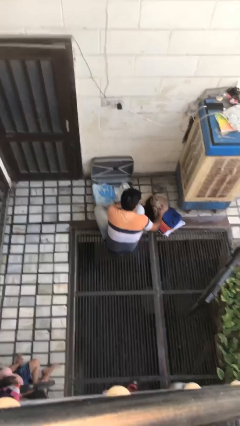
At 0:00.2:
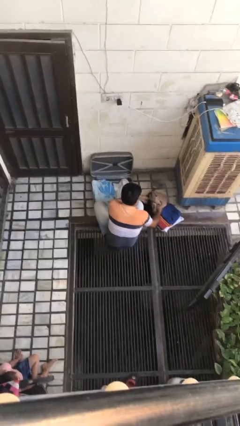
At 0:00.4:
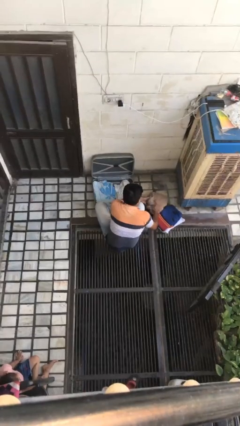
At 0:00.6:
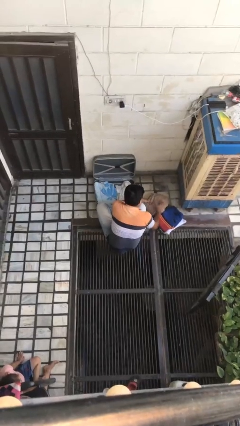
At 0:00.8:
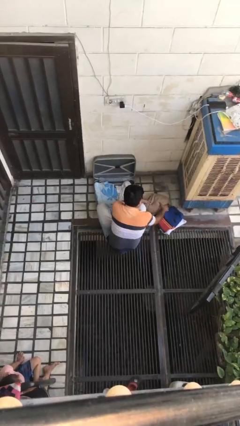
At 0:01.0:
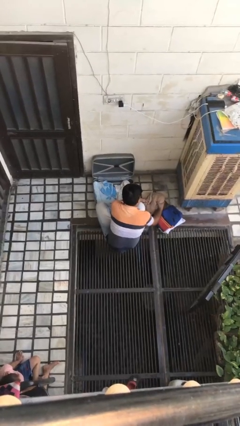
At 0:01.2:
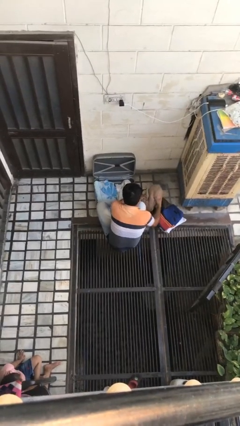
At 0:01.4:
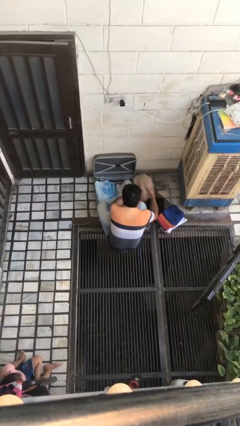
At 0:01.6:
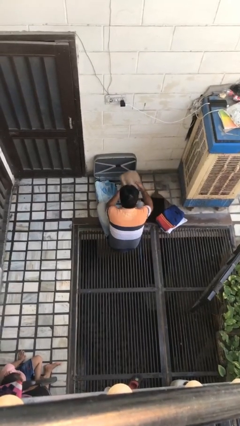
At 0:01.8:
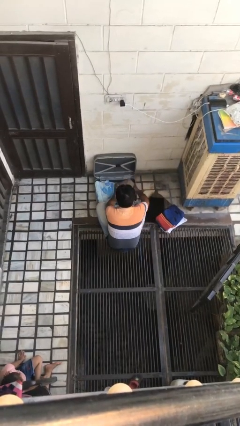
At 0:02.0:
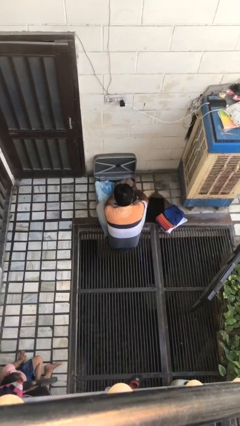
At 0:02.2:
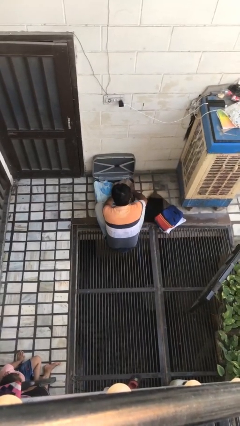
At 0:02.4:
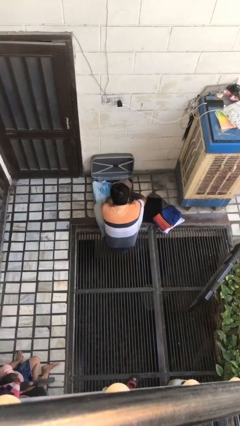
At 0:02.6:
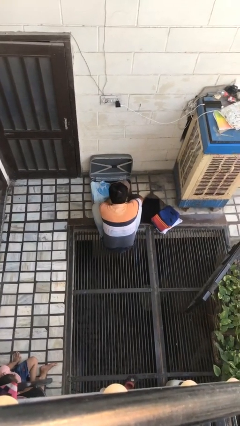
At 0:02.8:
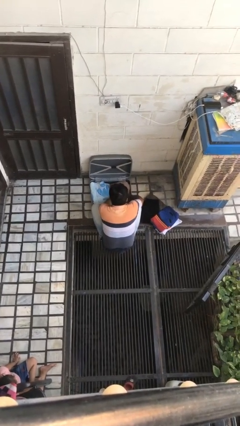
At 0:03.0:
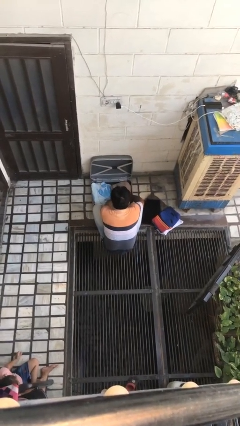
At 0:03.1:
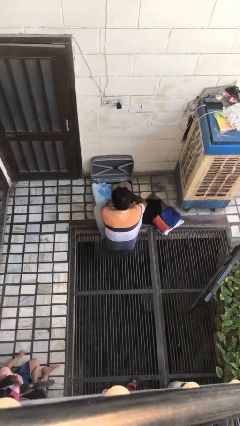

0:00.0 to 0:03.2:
person loads clothes into suitcase

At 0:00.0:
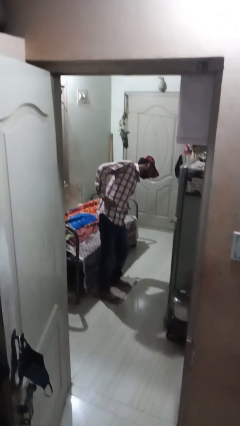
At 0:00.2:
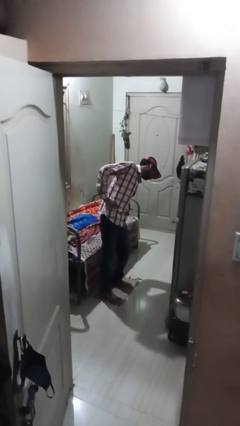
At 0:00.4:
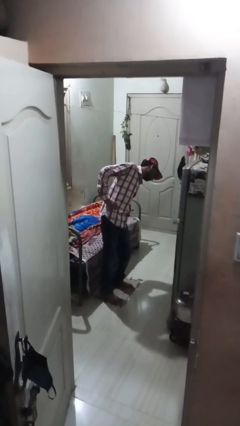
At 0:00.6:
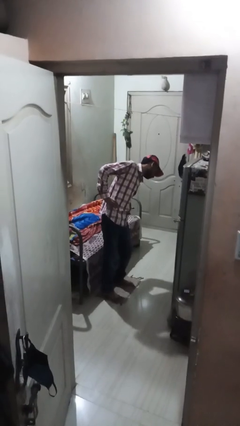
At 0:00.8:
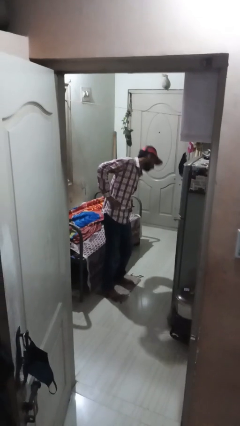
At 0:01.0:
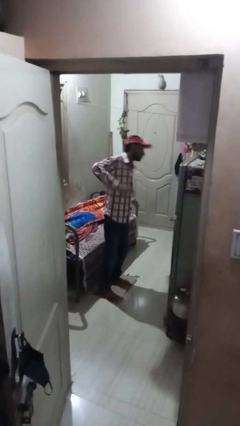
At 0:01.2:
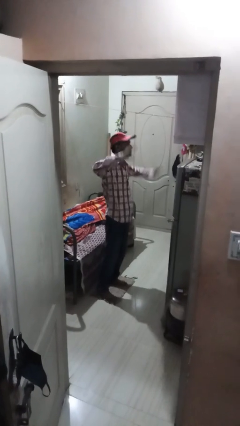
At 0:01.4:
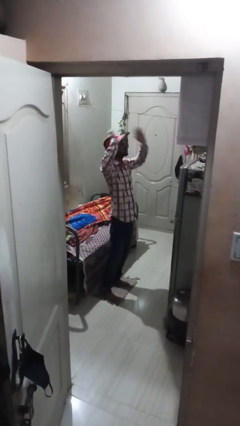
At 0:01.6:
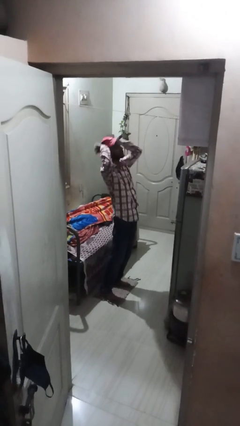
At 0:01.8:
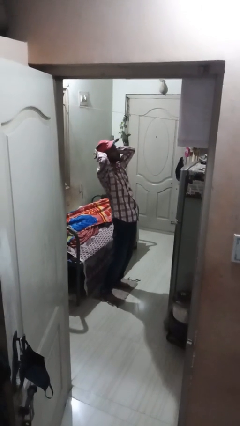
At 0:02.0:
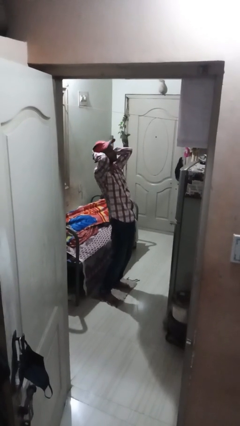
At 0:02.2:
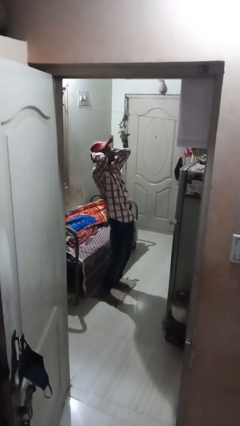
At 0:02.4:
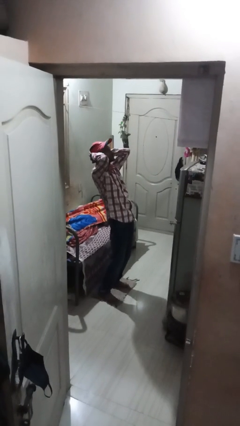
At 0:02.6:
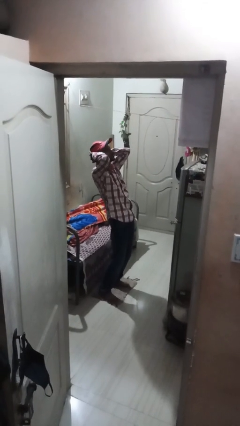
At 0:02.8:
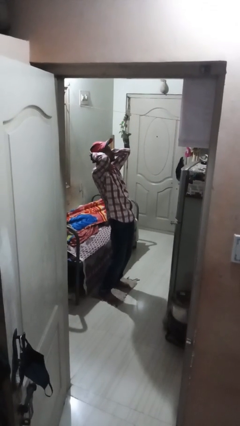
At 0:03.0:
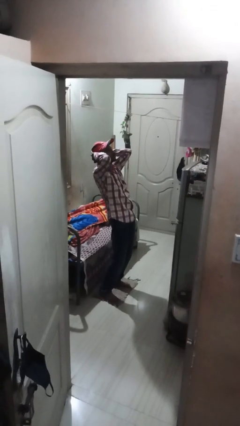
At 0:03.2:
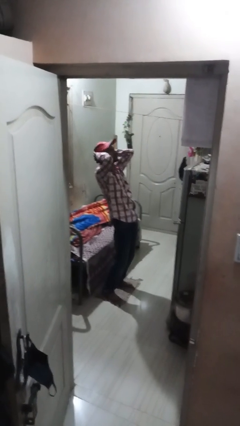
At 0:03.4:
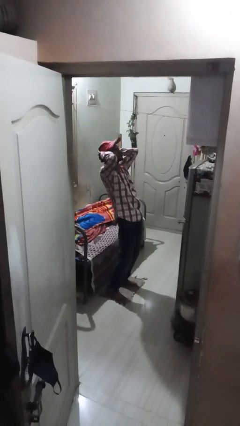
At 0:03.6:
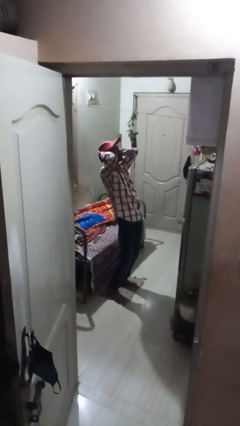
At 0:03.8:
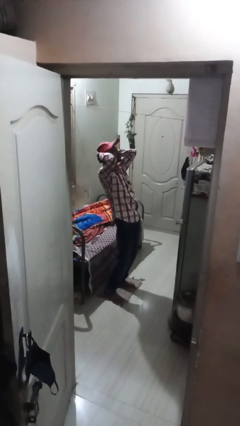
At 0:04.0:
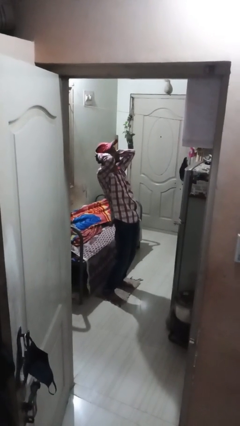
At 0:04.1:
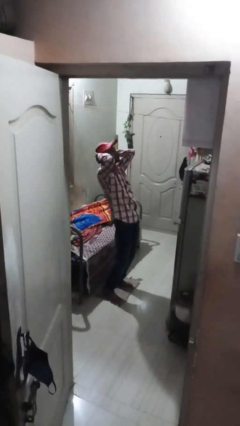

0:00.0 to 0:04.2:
person stretches arms over head

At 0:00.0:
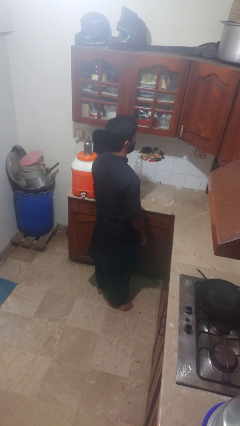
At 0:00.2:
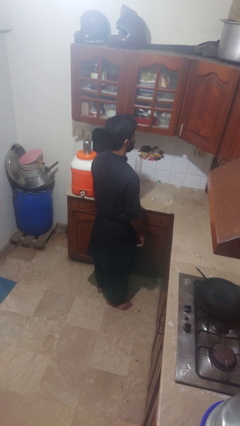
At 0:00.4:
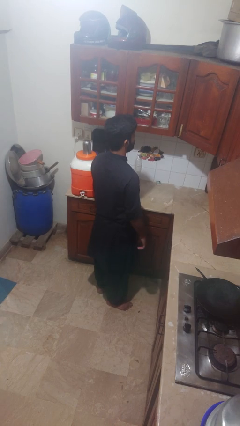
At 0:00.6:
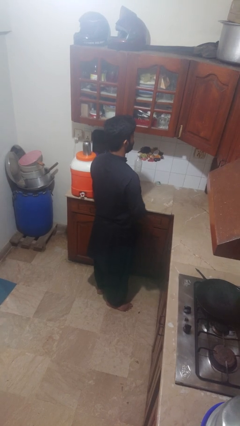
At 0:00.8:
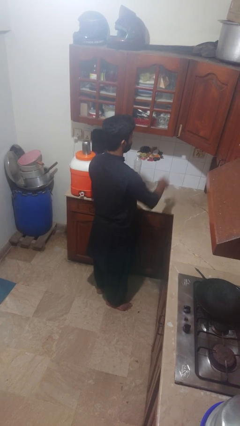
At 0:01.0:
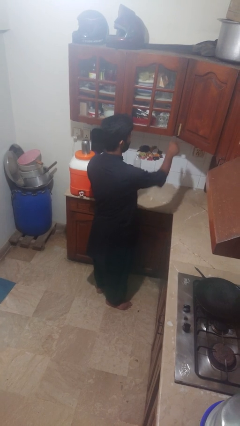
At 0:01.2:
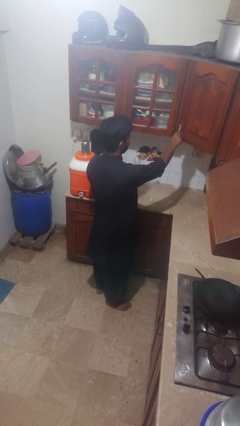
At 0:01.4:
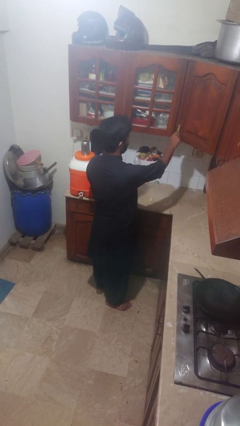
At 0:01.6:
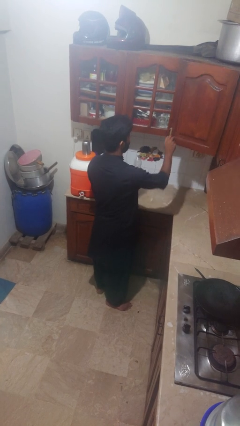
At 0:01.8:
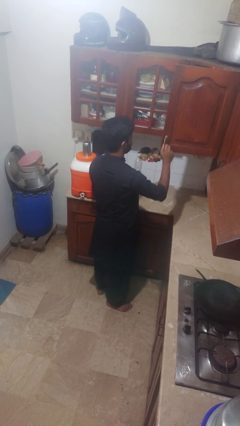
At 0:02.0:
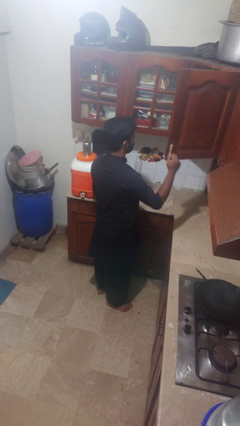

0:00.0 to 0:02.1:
person opens cabinet

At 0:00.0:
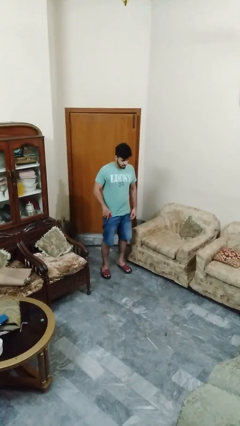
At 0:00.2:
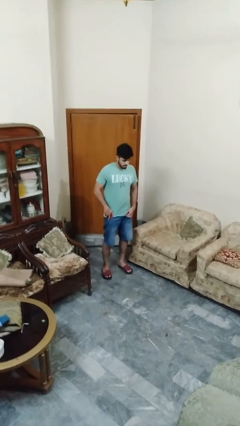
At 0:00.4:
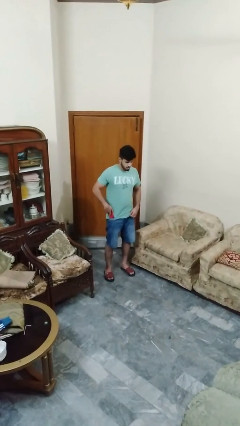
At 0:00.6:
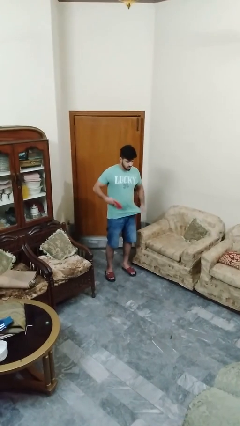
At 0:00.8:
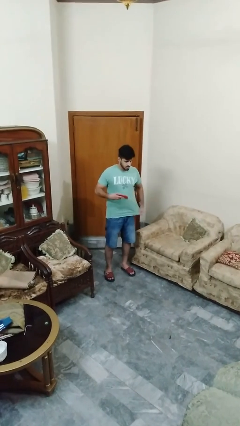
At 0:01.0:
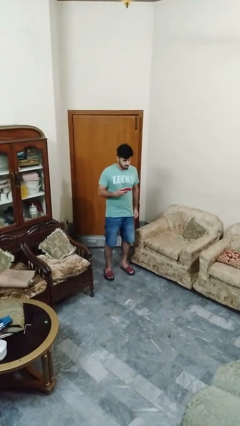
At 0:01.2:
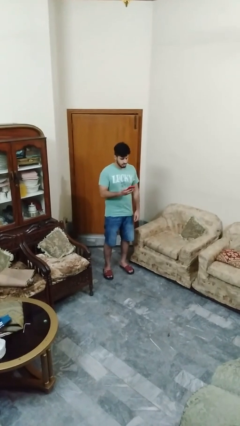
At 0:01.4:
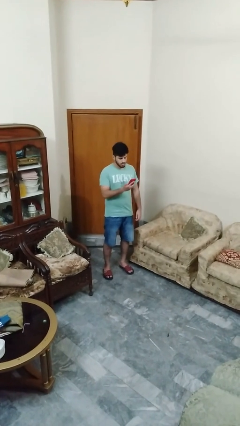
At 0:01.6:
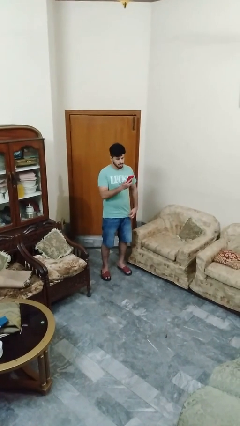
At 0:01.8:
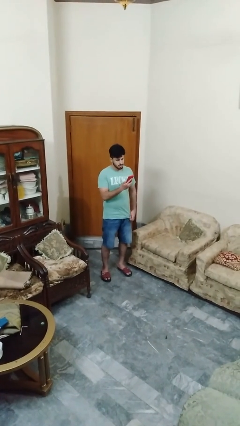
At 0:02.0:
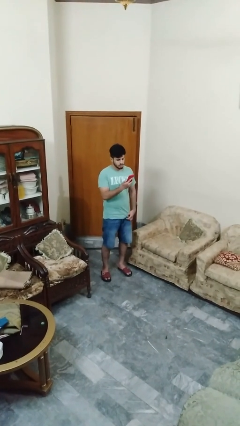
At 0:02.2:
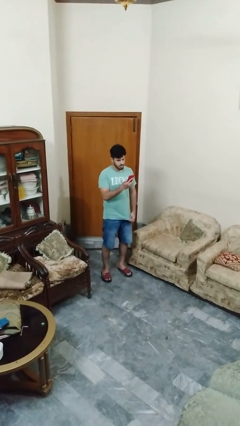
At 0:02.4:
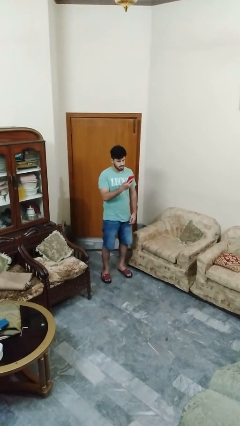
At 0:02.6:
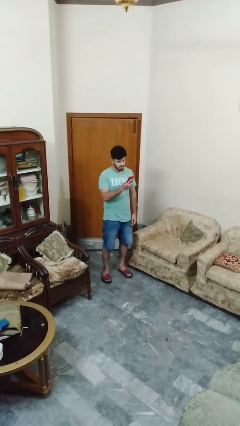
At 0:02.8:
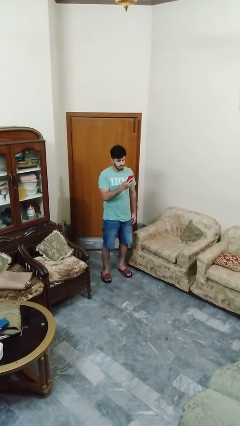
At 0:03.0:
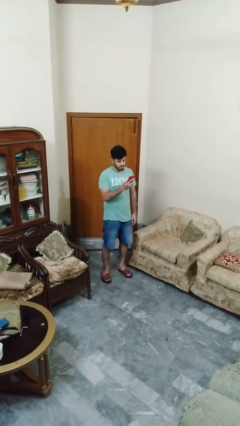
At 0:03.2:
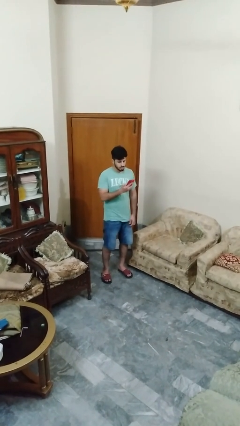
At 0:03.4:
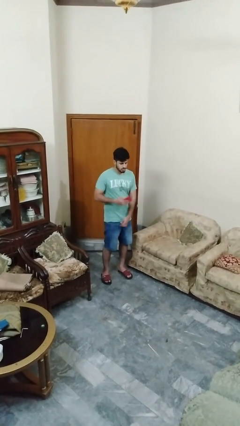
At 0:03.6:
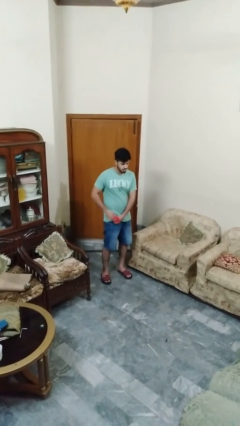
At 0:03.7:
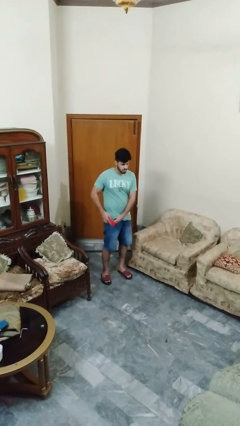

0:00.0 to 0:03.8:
person takes phone from pocket

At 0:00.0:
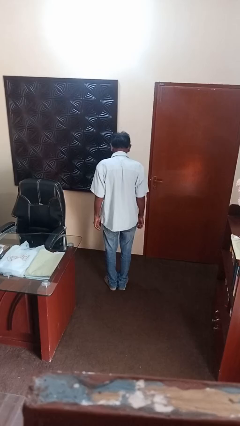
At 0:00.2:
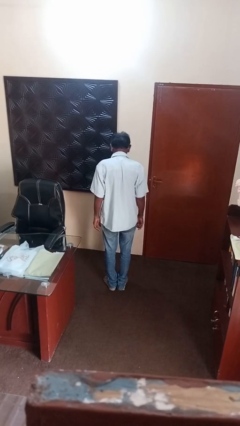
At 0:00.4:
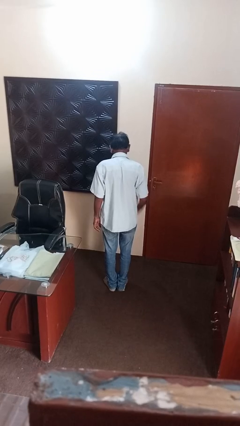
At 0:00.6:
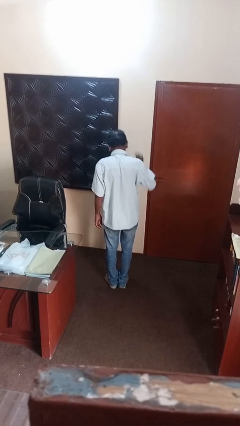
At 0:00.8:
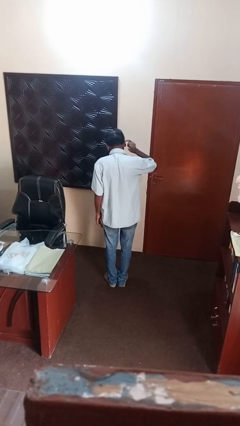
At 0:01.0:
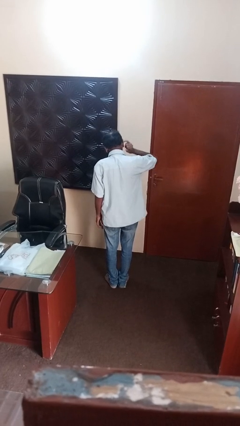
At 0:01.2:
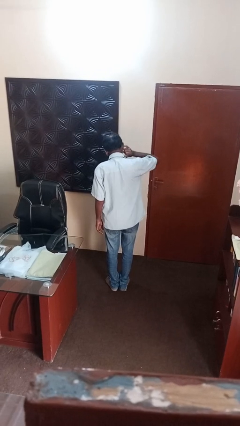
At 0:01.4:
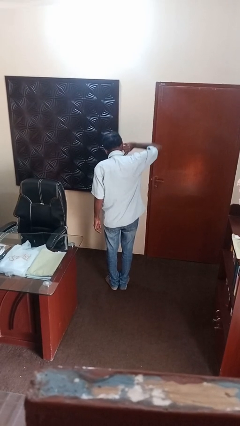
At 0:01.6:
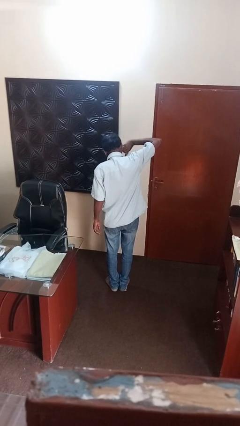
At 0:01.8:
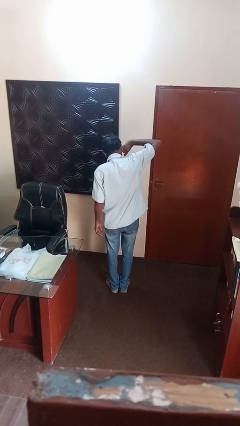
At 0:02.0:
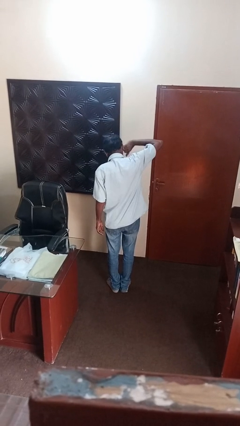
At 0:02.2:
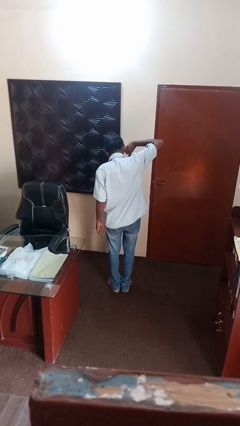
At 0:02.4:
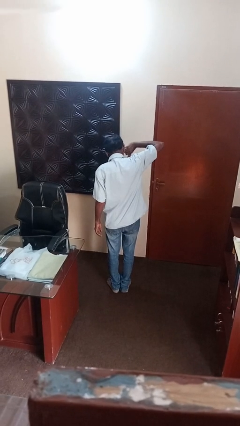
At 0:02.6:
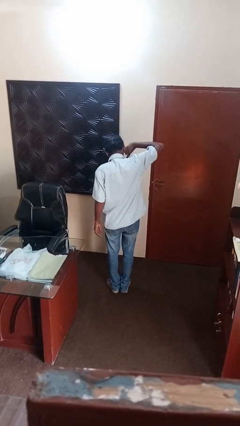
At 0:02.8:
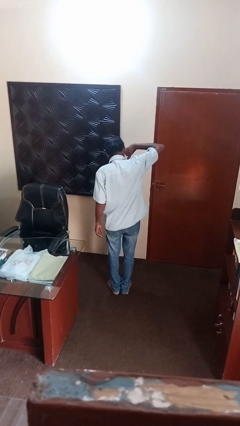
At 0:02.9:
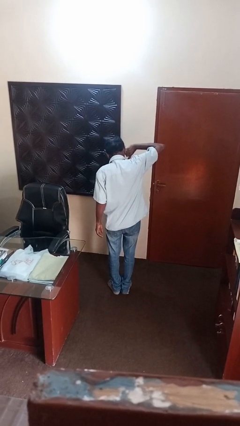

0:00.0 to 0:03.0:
person puts fingers in ear

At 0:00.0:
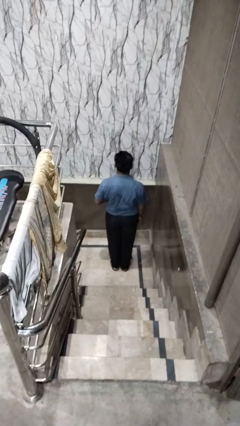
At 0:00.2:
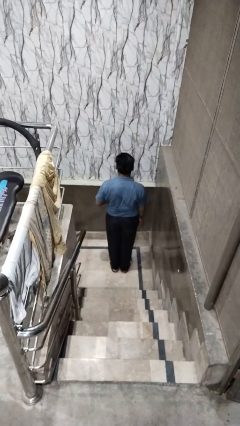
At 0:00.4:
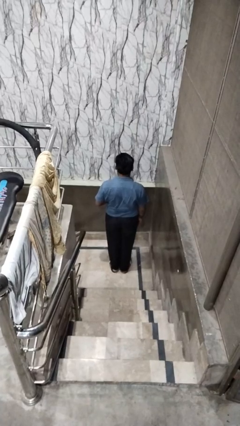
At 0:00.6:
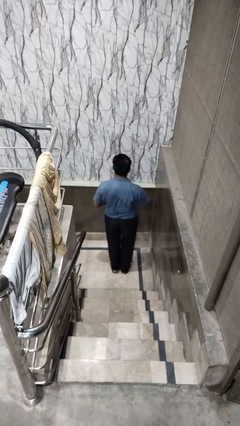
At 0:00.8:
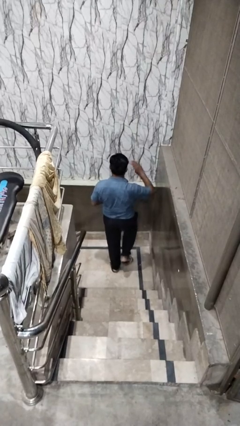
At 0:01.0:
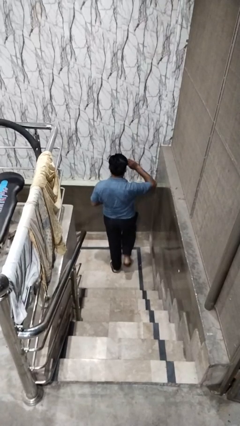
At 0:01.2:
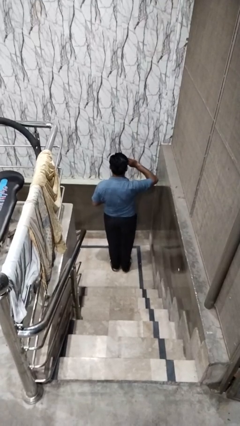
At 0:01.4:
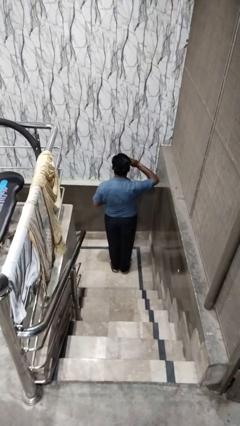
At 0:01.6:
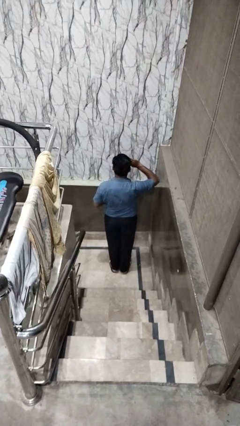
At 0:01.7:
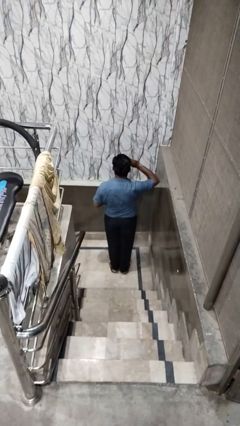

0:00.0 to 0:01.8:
person salutes
